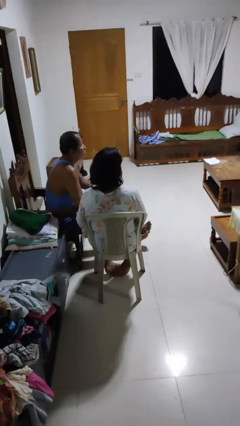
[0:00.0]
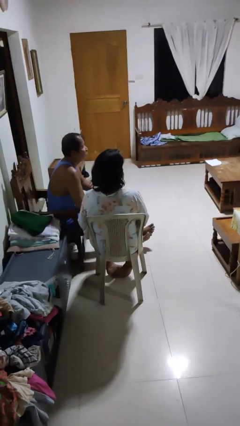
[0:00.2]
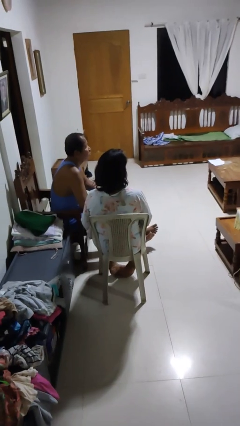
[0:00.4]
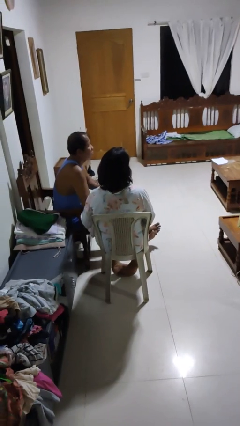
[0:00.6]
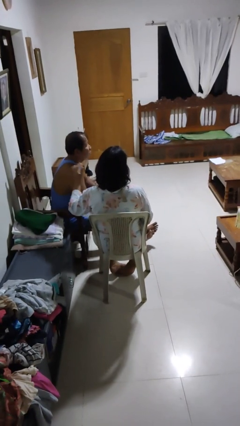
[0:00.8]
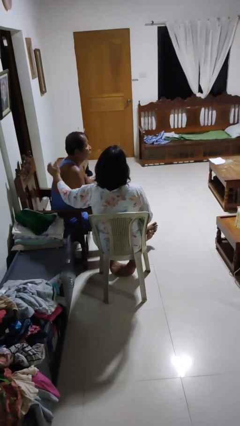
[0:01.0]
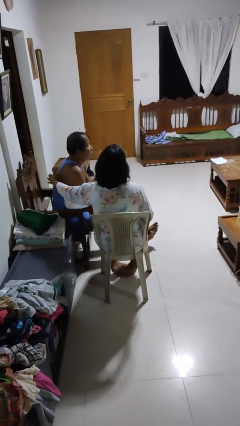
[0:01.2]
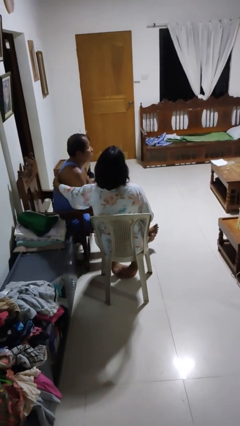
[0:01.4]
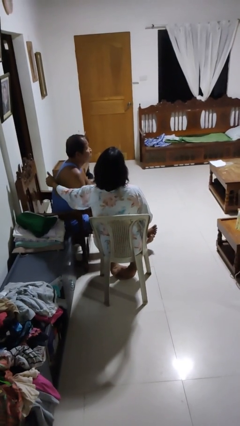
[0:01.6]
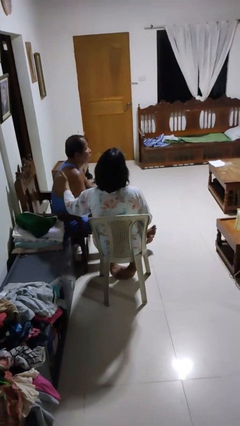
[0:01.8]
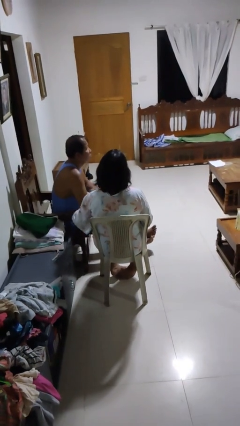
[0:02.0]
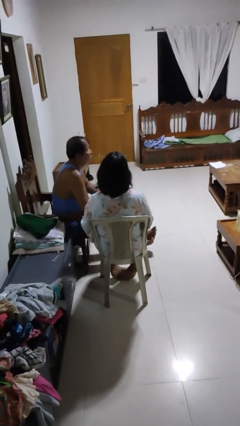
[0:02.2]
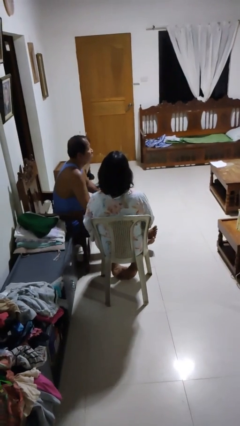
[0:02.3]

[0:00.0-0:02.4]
person touches back of person

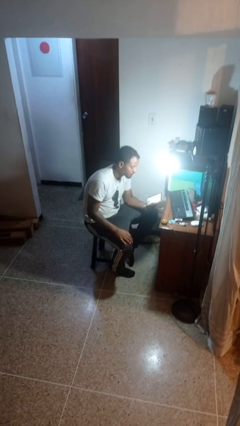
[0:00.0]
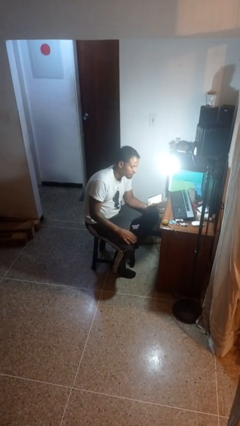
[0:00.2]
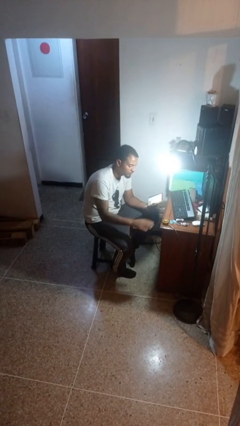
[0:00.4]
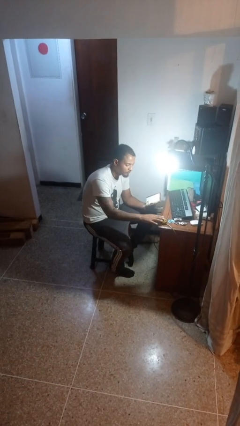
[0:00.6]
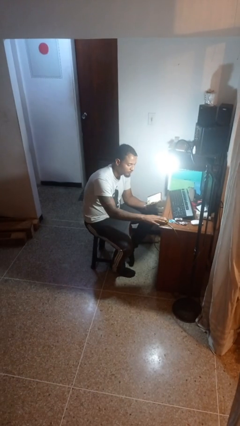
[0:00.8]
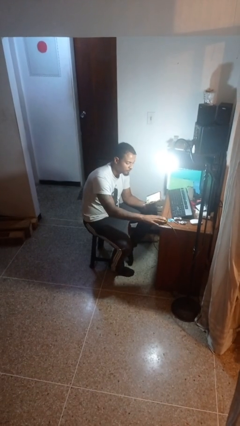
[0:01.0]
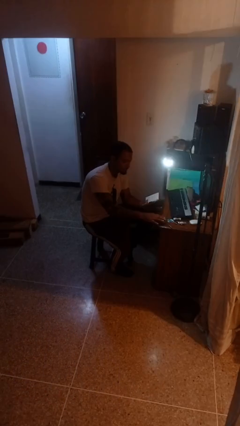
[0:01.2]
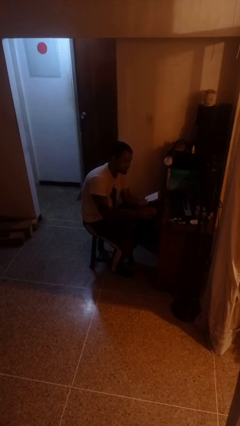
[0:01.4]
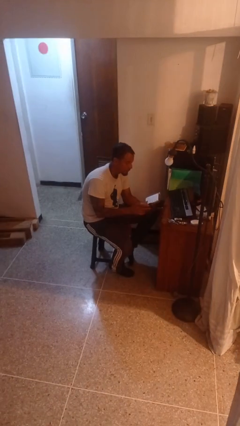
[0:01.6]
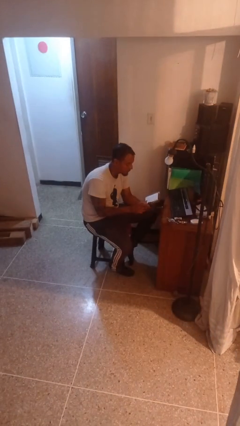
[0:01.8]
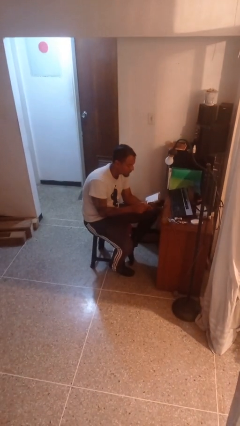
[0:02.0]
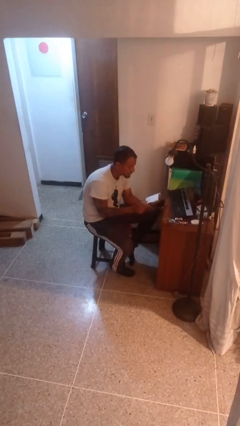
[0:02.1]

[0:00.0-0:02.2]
person turns off lamp

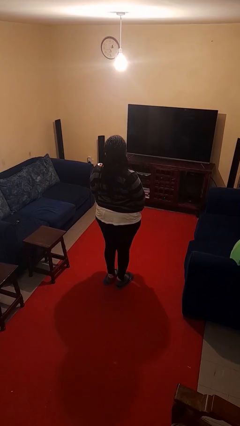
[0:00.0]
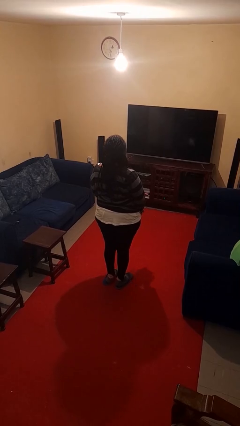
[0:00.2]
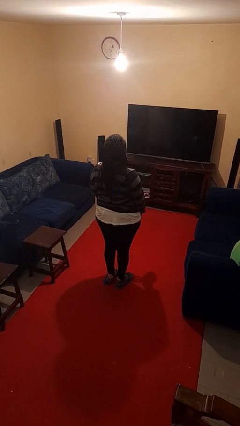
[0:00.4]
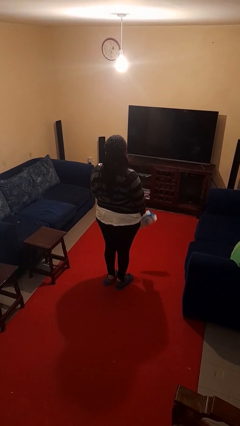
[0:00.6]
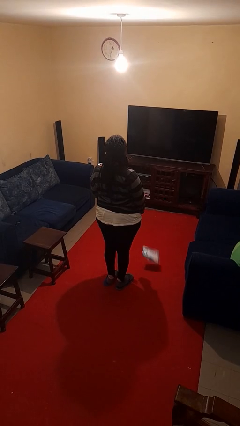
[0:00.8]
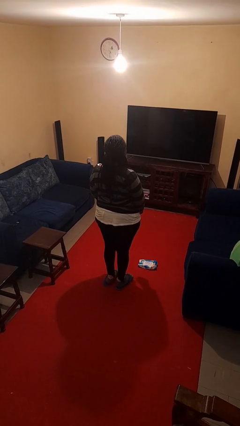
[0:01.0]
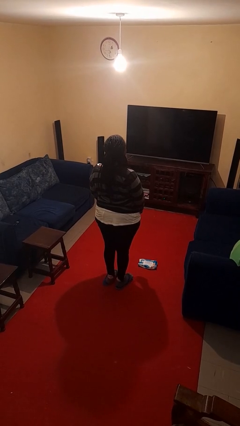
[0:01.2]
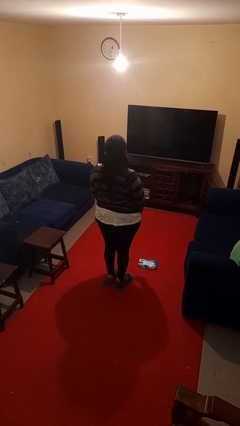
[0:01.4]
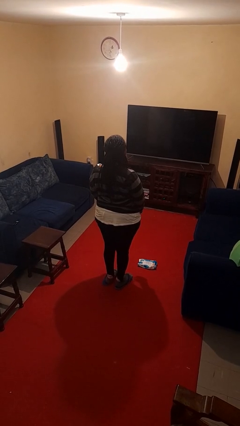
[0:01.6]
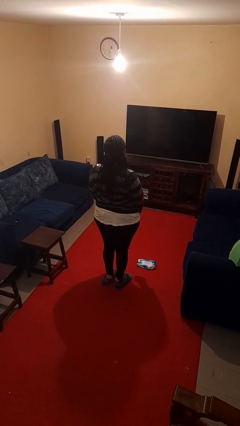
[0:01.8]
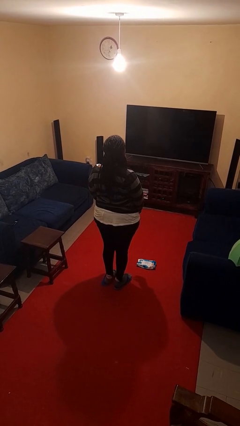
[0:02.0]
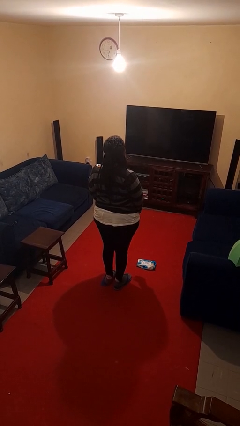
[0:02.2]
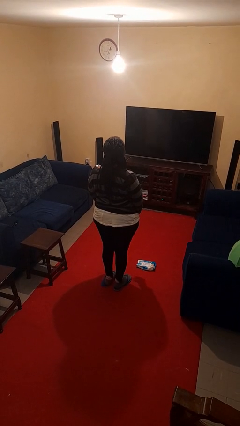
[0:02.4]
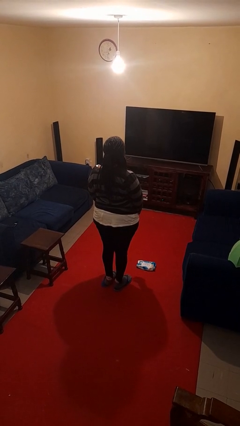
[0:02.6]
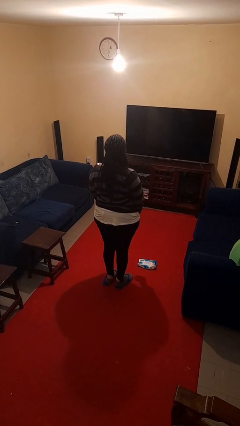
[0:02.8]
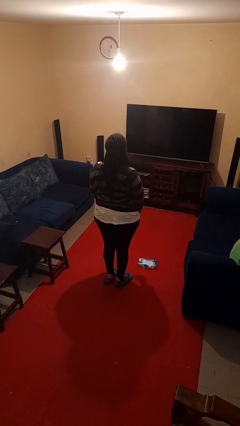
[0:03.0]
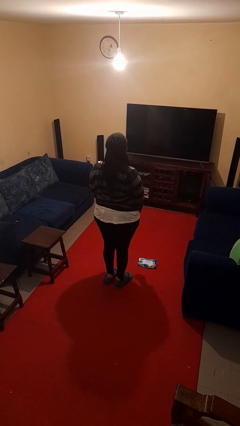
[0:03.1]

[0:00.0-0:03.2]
person drops object

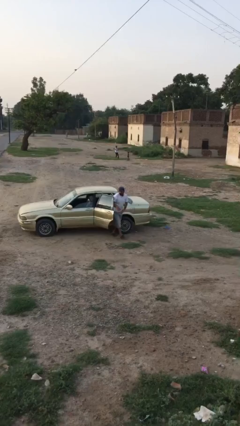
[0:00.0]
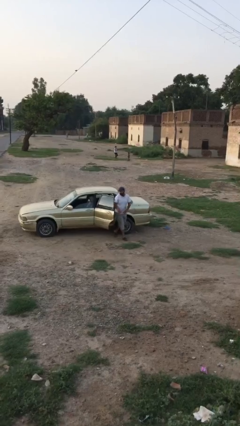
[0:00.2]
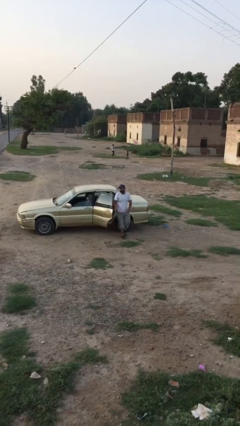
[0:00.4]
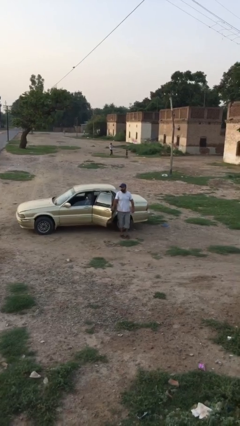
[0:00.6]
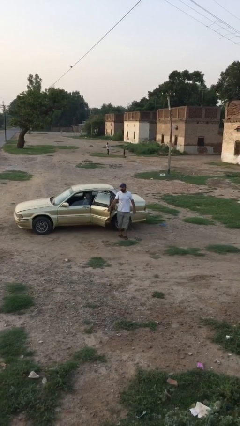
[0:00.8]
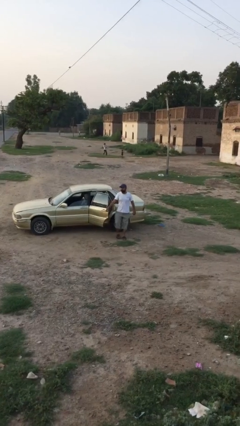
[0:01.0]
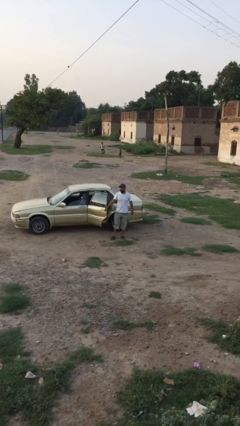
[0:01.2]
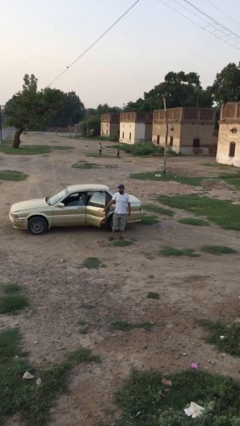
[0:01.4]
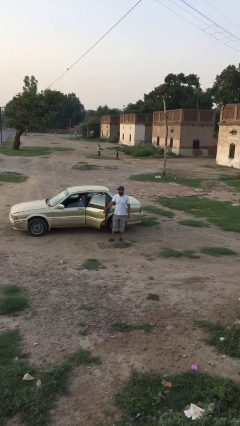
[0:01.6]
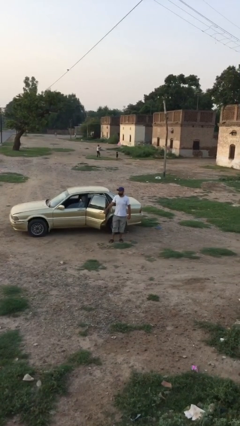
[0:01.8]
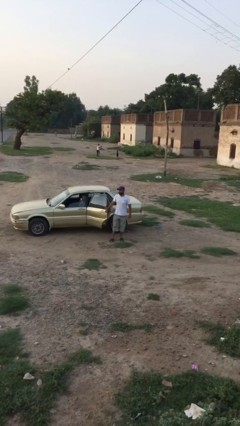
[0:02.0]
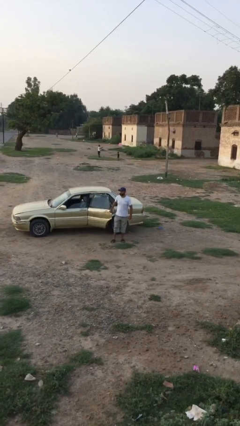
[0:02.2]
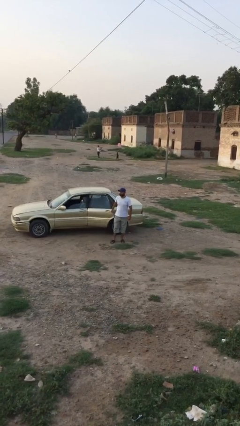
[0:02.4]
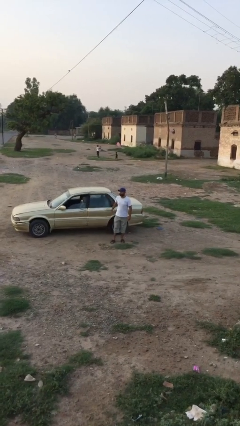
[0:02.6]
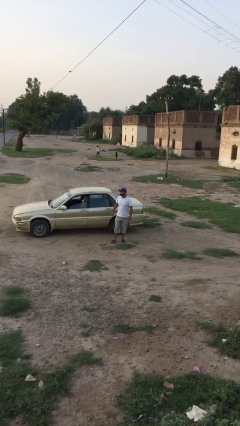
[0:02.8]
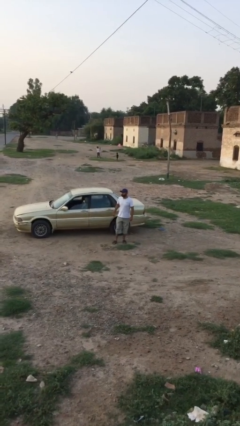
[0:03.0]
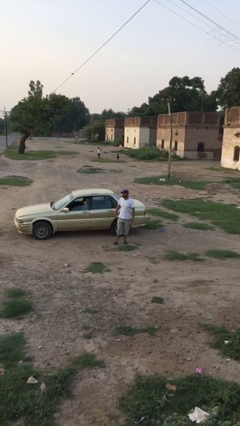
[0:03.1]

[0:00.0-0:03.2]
person closes car door

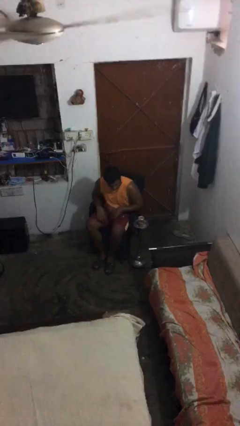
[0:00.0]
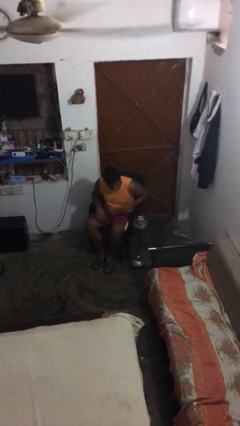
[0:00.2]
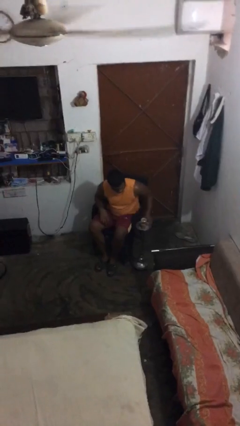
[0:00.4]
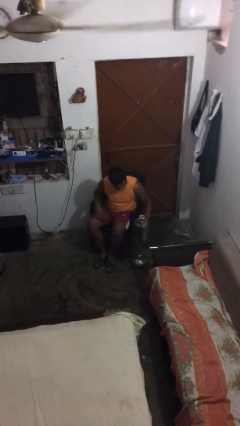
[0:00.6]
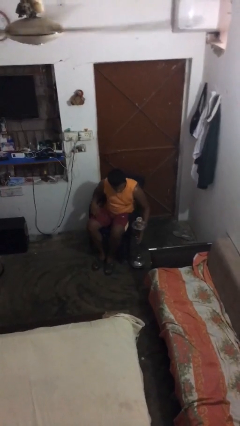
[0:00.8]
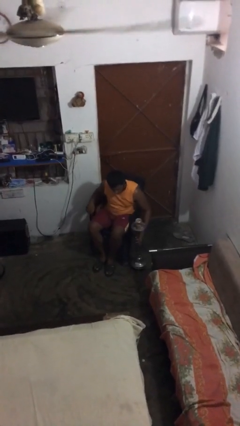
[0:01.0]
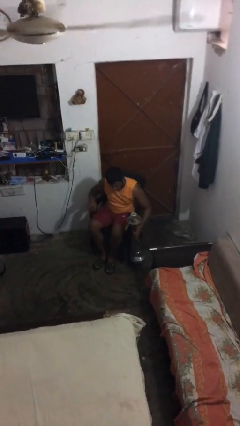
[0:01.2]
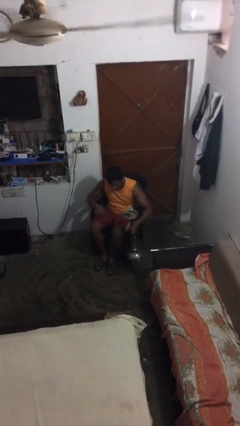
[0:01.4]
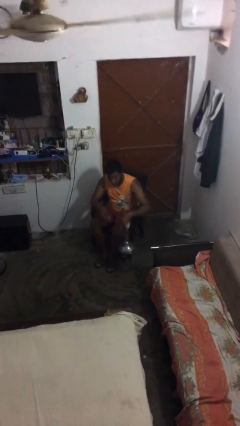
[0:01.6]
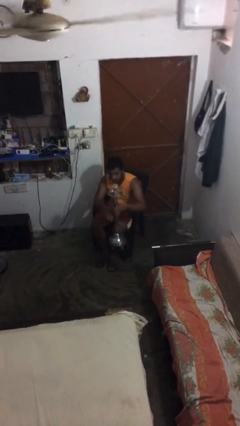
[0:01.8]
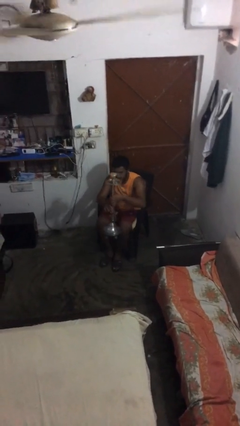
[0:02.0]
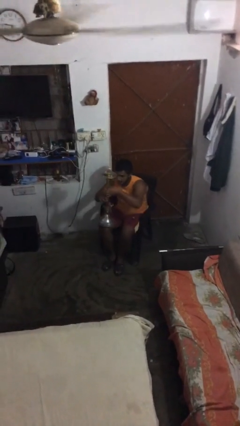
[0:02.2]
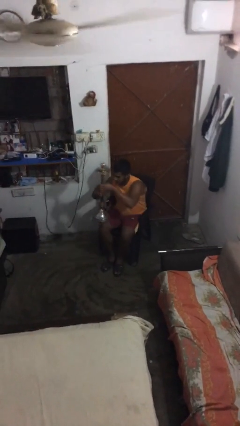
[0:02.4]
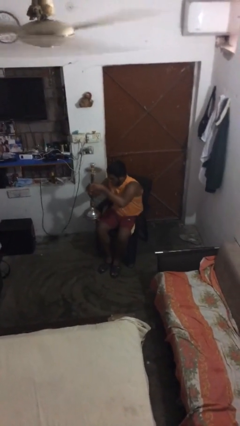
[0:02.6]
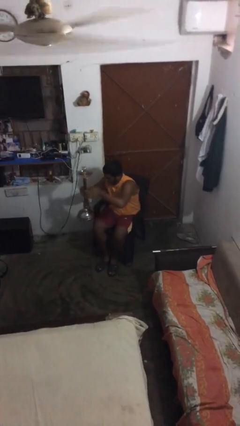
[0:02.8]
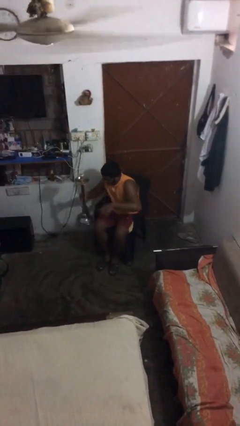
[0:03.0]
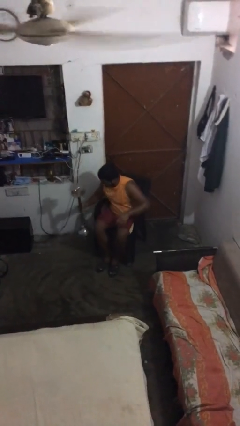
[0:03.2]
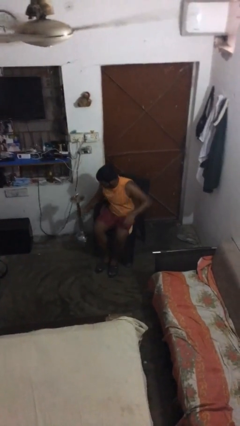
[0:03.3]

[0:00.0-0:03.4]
person picks up object from floor

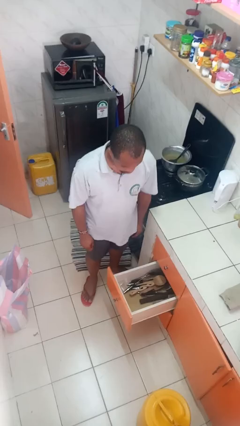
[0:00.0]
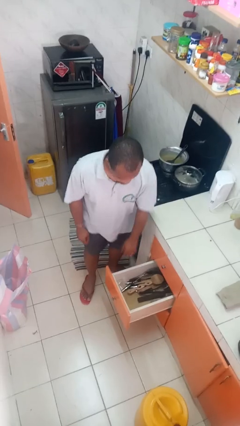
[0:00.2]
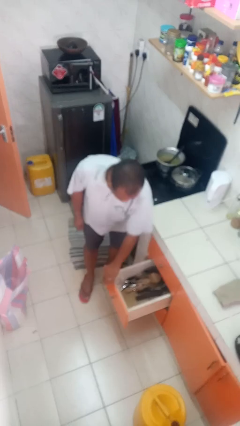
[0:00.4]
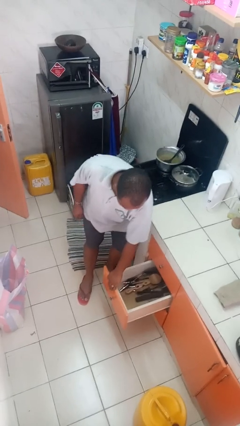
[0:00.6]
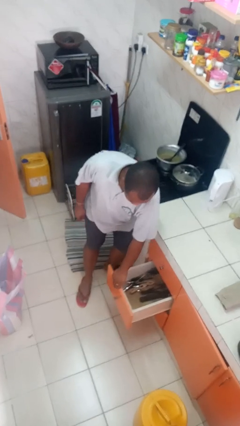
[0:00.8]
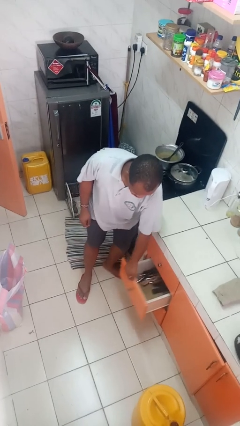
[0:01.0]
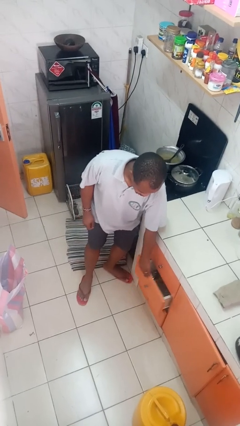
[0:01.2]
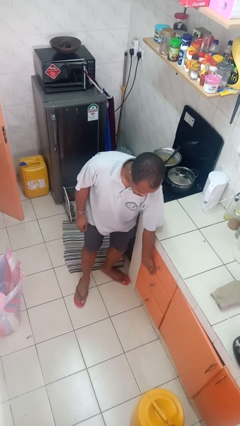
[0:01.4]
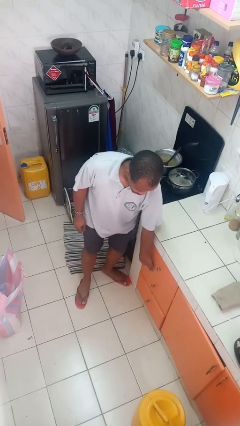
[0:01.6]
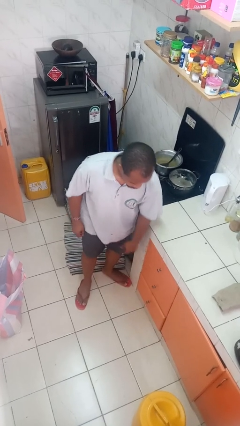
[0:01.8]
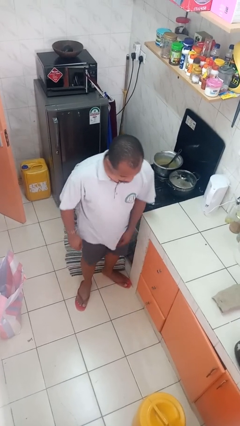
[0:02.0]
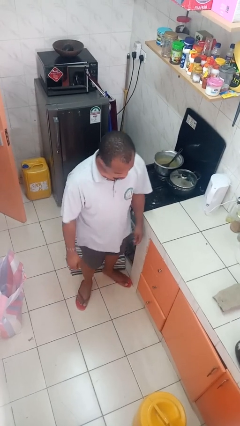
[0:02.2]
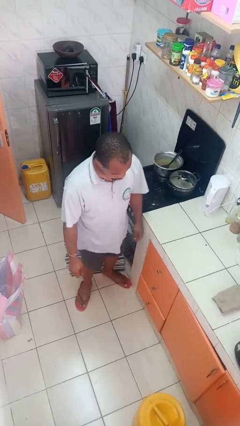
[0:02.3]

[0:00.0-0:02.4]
person closes kitchen drawer

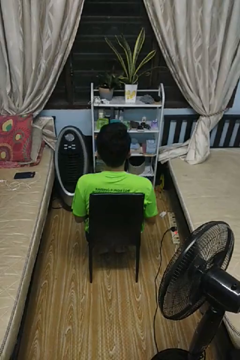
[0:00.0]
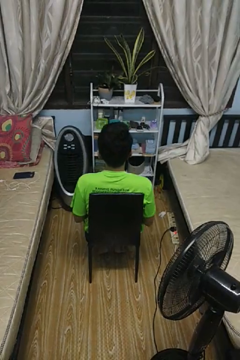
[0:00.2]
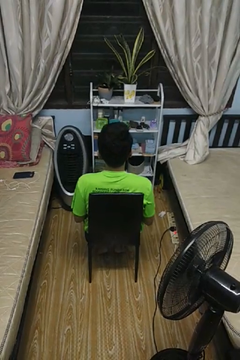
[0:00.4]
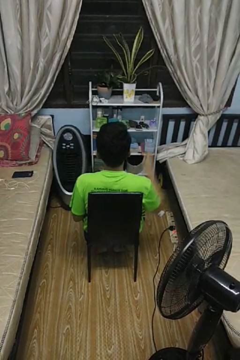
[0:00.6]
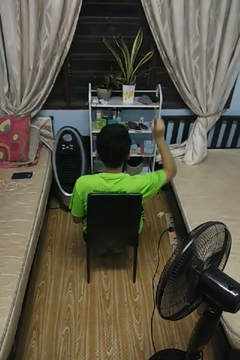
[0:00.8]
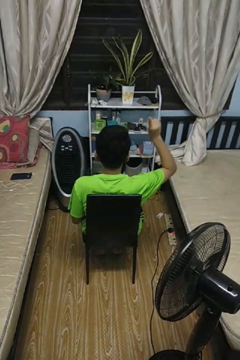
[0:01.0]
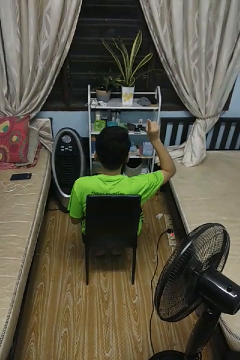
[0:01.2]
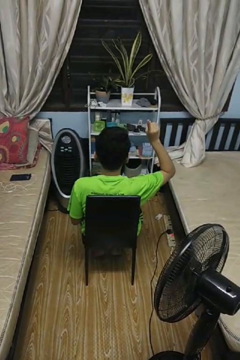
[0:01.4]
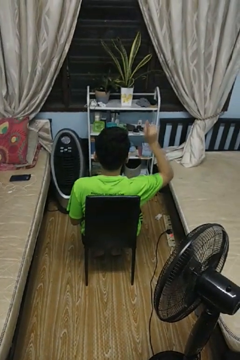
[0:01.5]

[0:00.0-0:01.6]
person gestures number one
